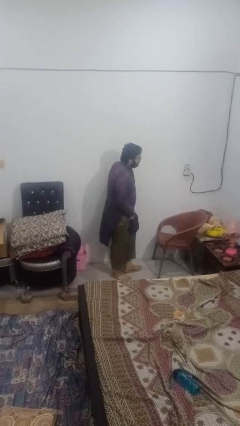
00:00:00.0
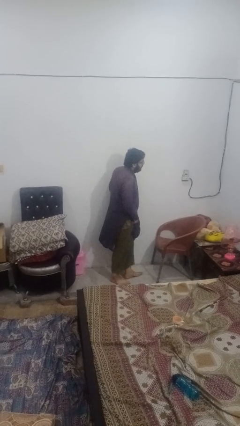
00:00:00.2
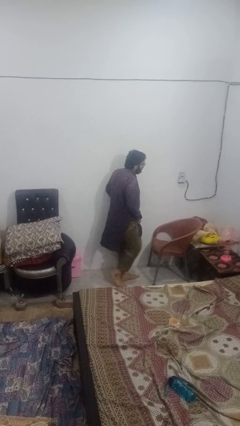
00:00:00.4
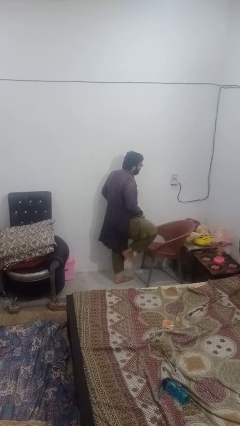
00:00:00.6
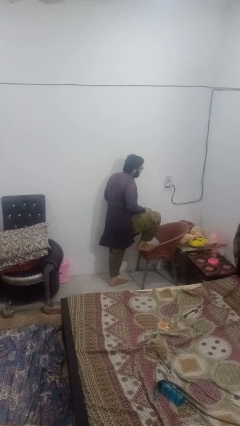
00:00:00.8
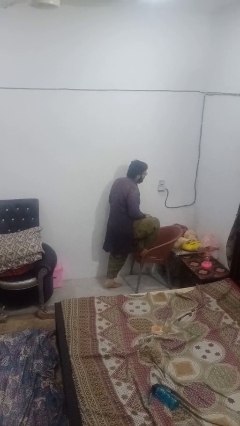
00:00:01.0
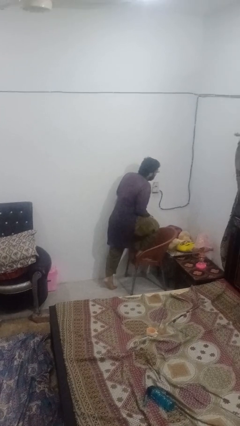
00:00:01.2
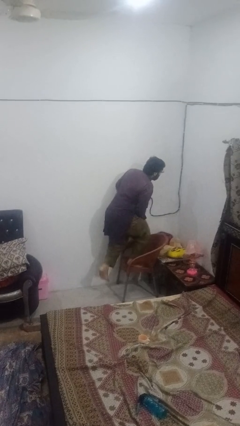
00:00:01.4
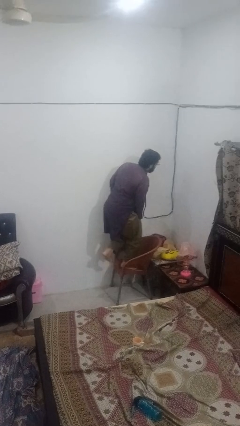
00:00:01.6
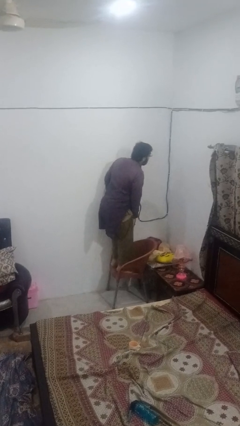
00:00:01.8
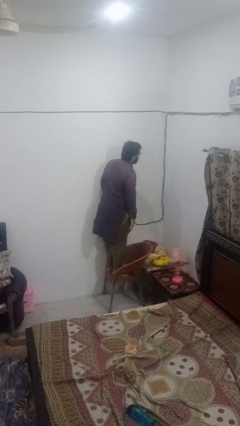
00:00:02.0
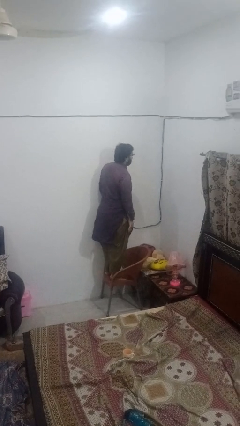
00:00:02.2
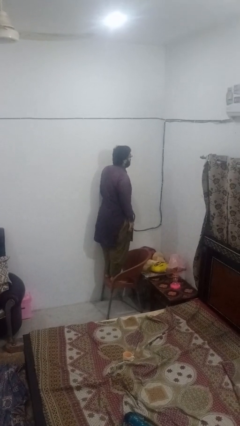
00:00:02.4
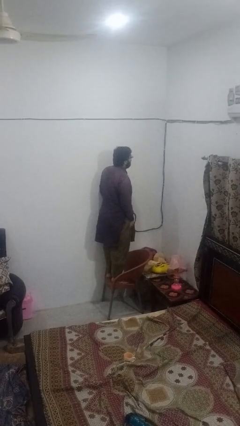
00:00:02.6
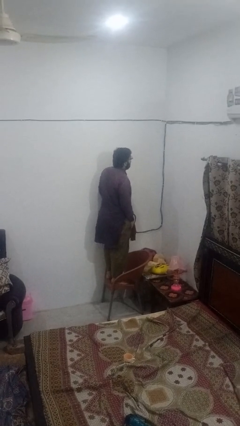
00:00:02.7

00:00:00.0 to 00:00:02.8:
person climbs on chair

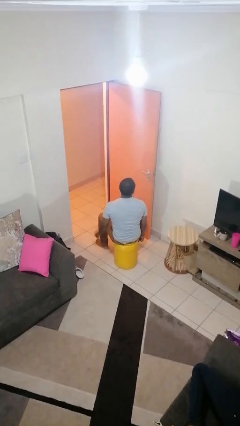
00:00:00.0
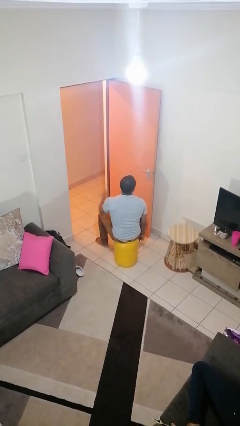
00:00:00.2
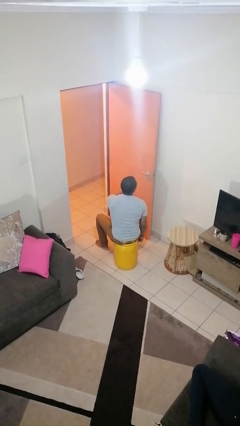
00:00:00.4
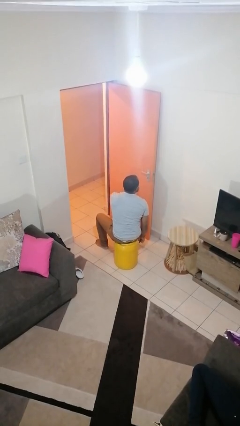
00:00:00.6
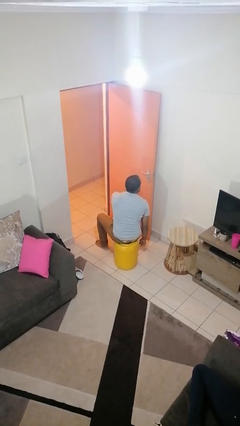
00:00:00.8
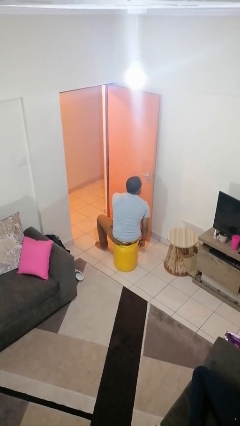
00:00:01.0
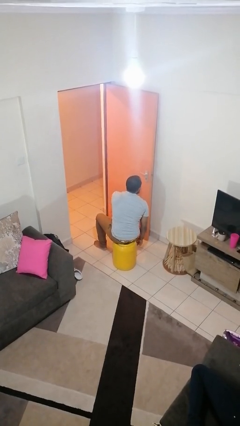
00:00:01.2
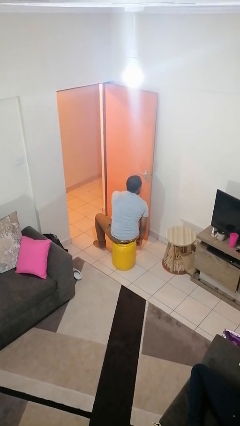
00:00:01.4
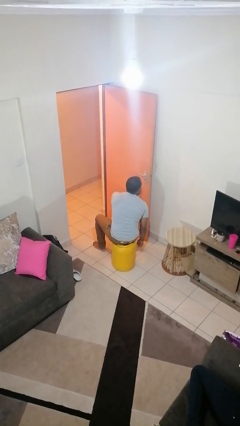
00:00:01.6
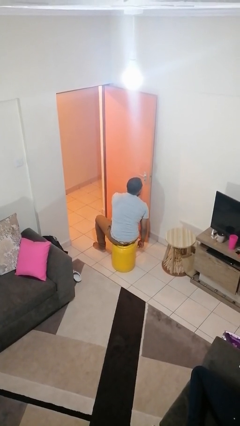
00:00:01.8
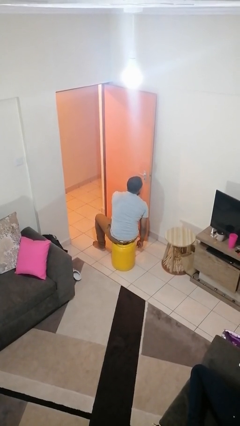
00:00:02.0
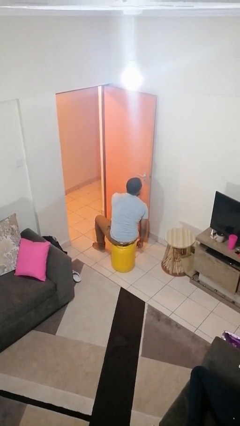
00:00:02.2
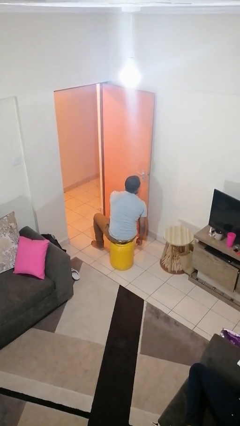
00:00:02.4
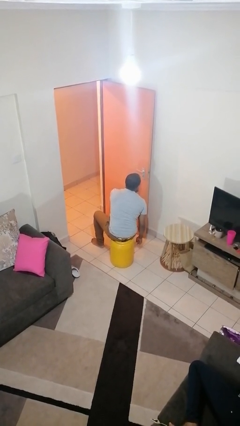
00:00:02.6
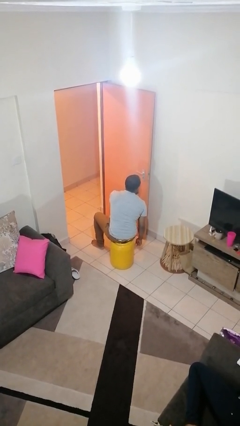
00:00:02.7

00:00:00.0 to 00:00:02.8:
person gestures be quiet

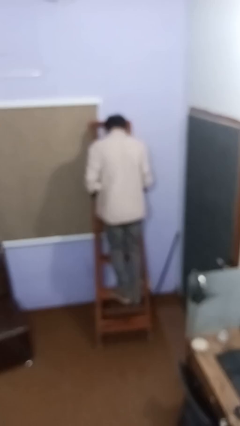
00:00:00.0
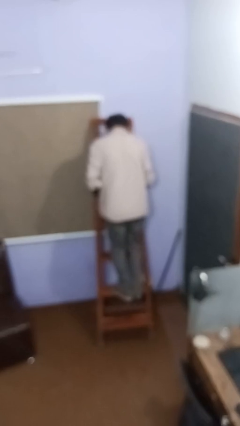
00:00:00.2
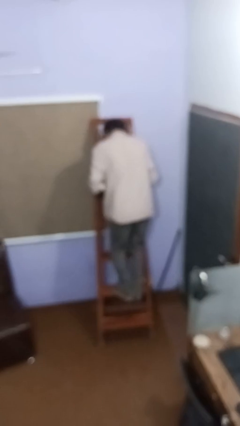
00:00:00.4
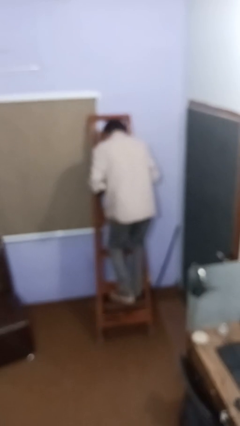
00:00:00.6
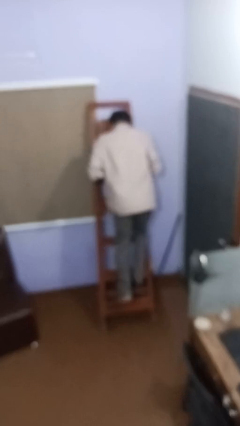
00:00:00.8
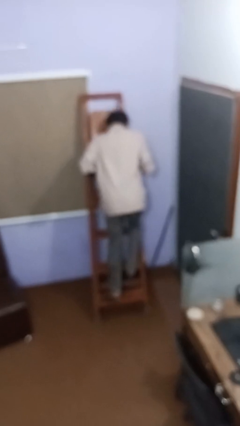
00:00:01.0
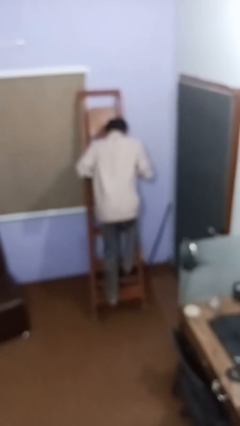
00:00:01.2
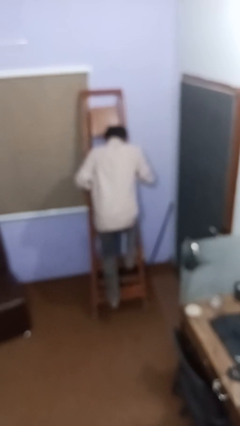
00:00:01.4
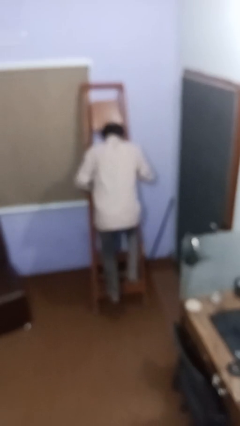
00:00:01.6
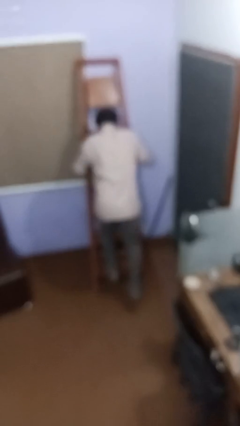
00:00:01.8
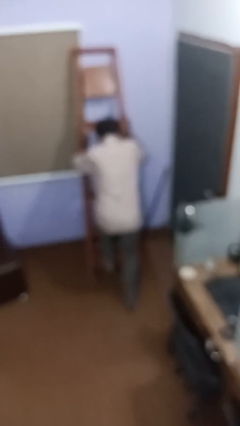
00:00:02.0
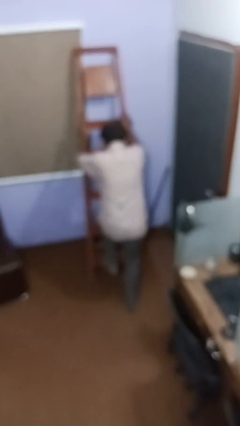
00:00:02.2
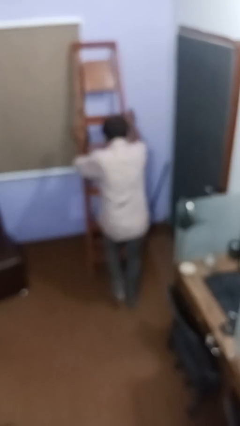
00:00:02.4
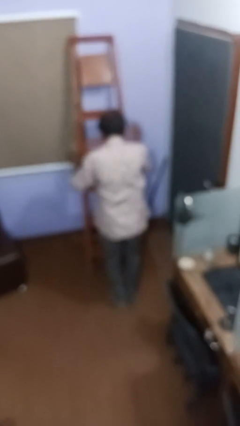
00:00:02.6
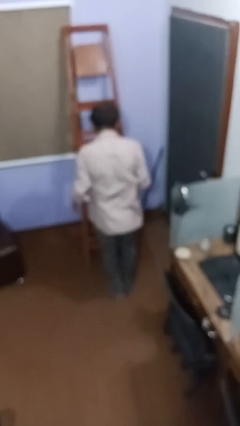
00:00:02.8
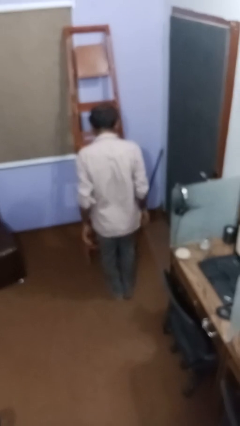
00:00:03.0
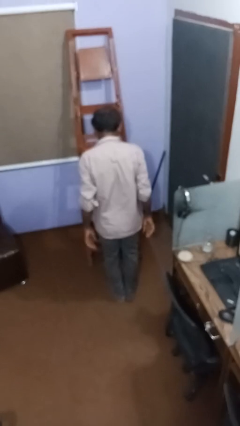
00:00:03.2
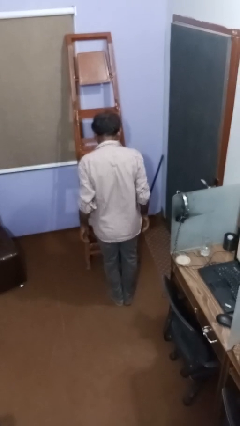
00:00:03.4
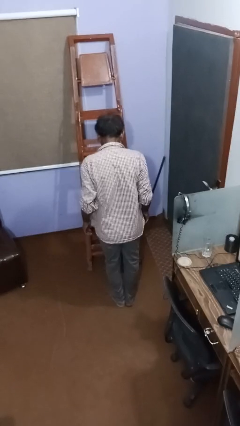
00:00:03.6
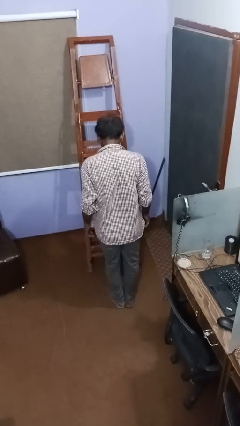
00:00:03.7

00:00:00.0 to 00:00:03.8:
person climbs down ladder

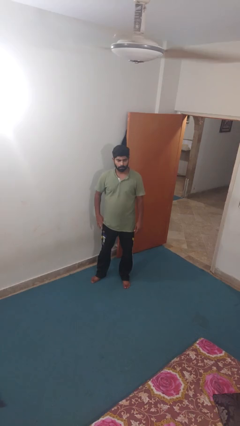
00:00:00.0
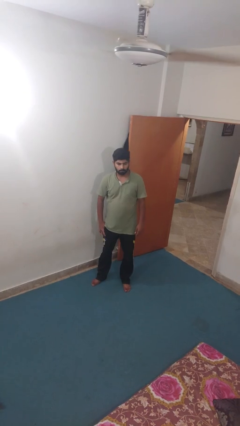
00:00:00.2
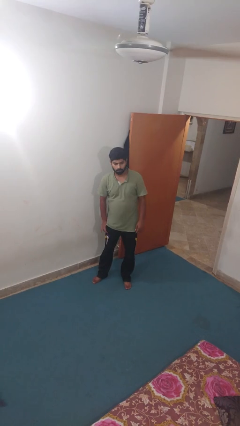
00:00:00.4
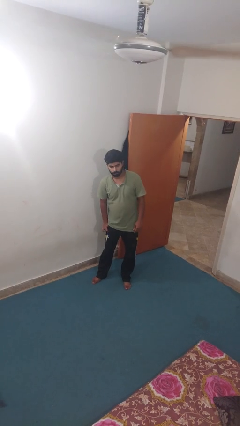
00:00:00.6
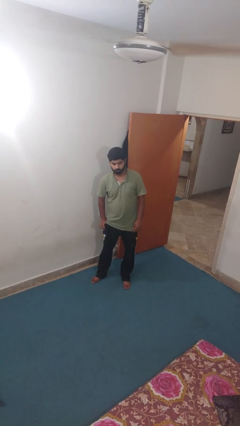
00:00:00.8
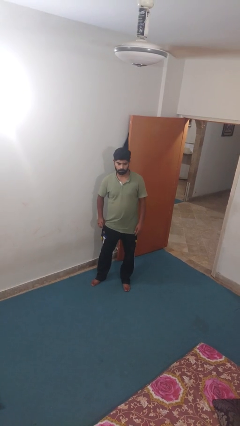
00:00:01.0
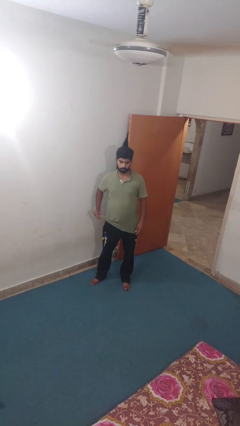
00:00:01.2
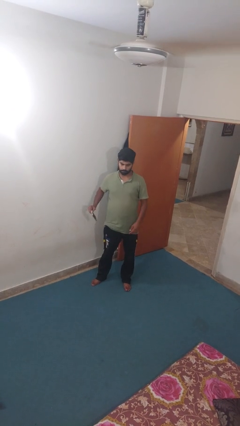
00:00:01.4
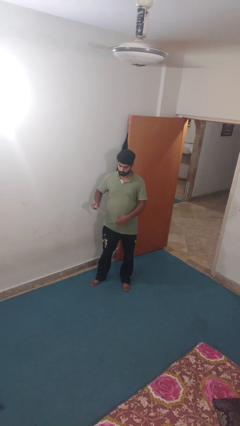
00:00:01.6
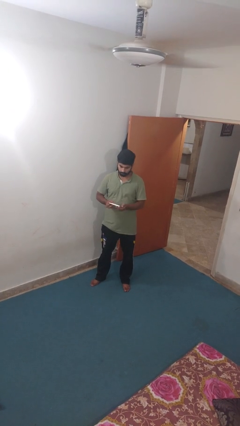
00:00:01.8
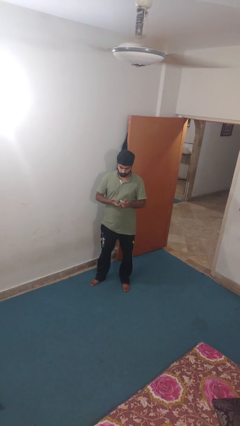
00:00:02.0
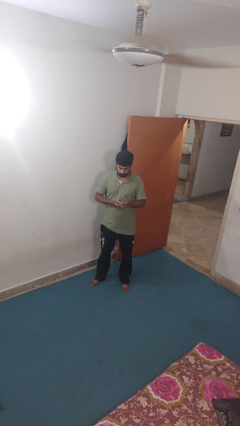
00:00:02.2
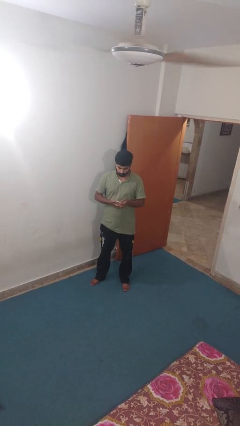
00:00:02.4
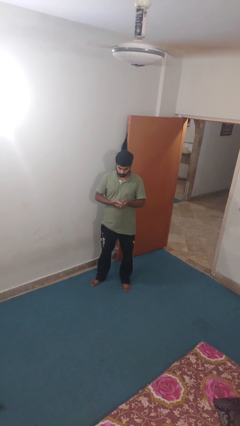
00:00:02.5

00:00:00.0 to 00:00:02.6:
person takes phone from pocket

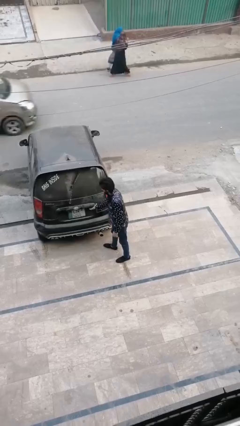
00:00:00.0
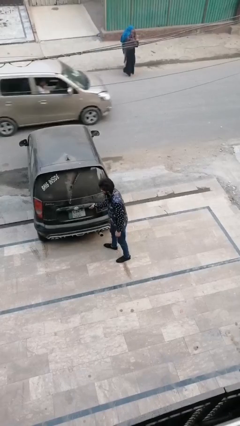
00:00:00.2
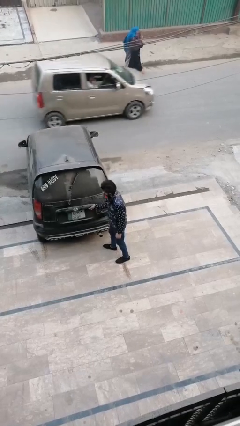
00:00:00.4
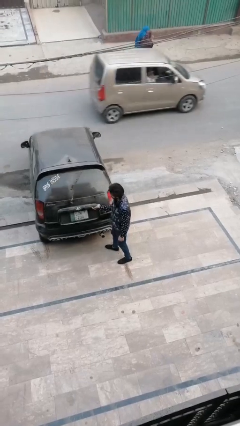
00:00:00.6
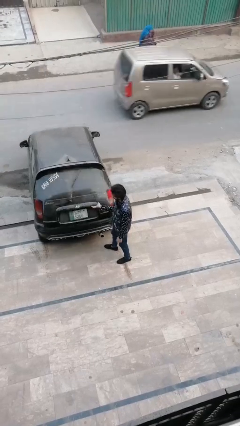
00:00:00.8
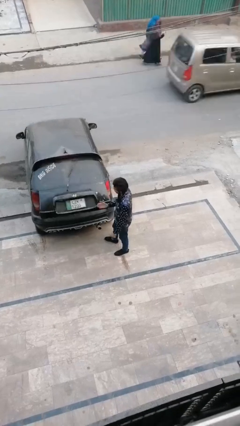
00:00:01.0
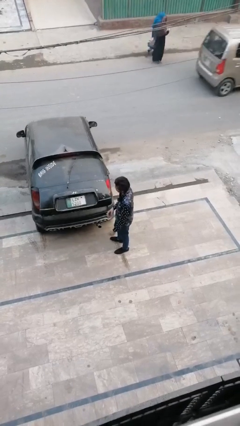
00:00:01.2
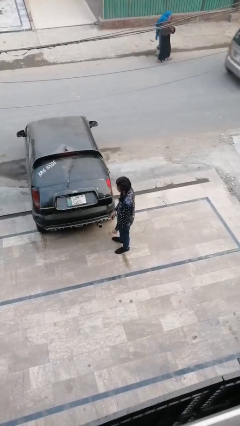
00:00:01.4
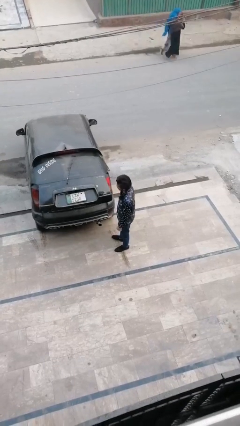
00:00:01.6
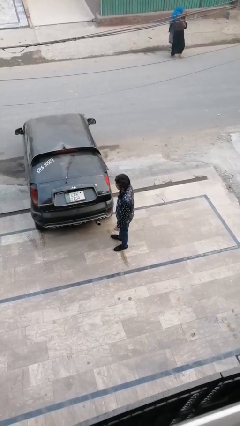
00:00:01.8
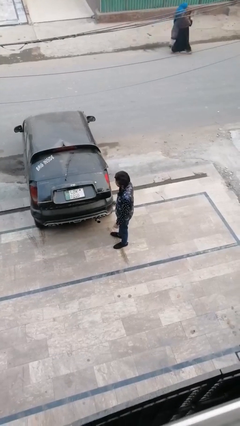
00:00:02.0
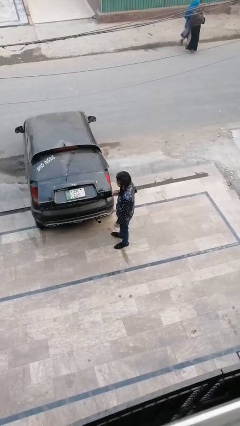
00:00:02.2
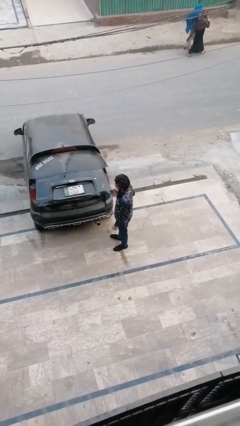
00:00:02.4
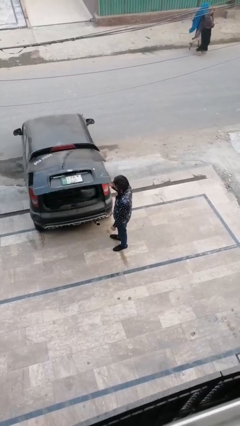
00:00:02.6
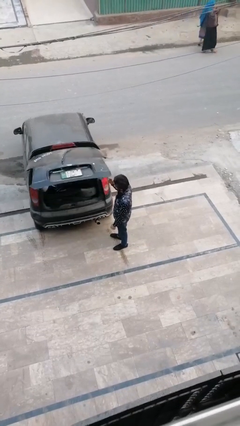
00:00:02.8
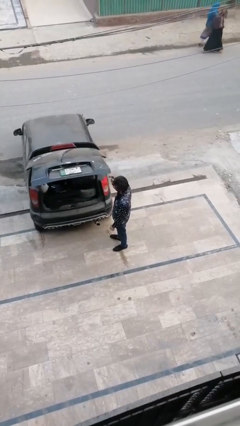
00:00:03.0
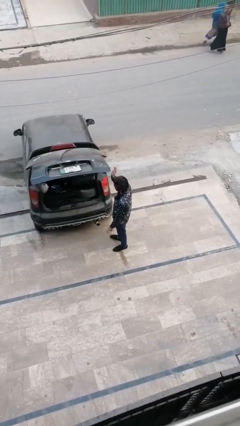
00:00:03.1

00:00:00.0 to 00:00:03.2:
person opens car trunk

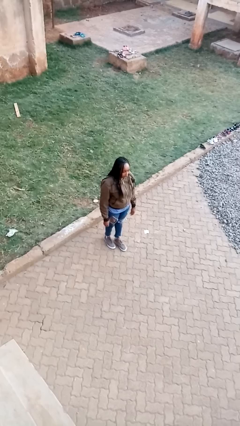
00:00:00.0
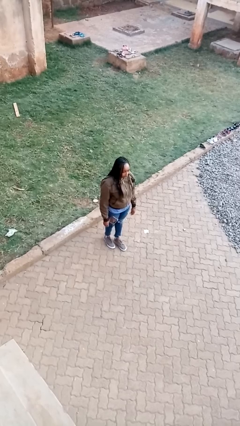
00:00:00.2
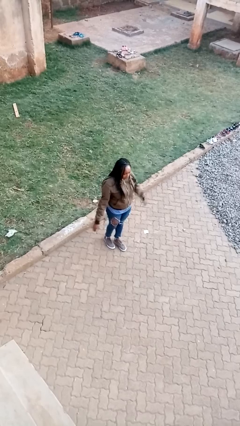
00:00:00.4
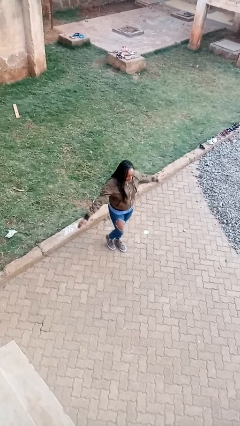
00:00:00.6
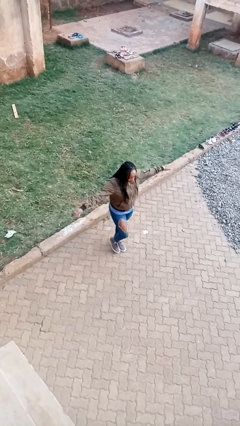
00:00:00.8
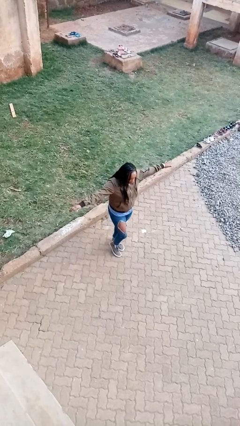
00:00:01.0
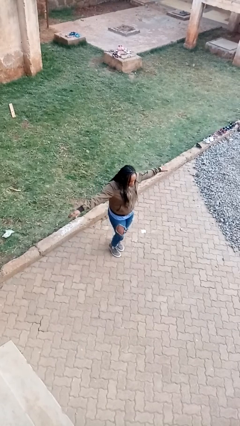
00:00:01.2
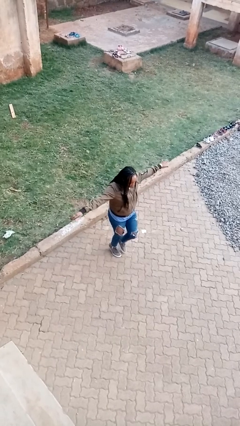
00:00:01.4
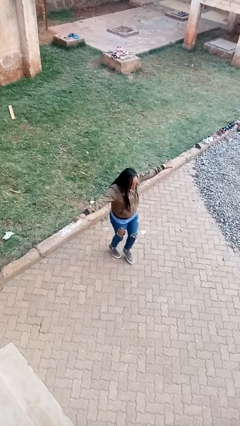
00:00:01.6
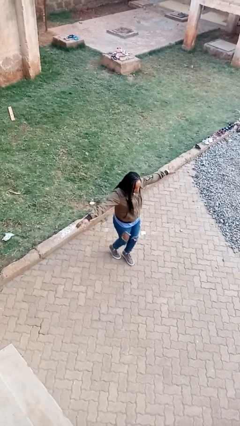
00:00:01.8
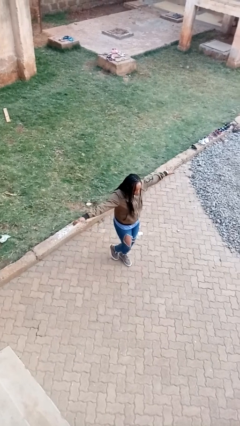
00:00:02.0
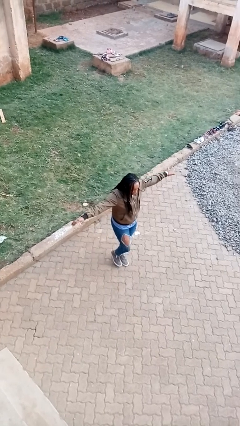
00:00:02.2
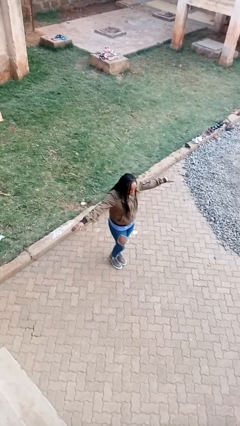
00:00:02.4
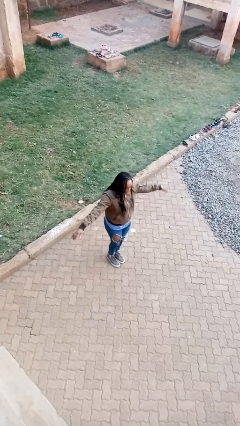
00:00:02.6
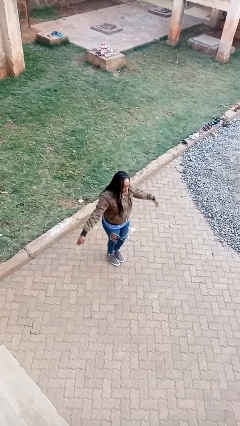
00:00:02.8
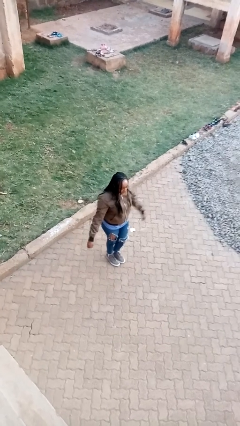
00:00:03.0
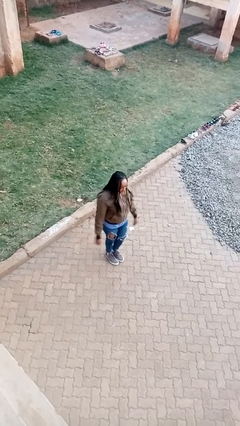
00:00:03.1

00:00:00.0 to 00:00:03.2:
person walks tiptoe
